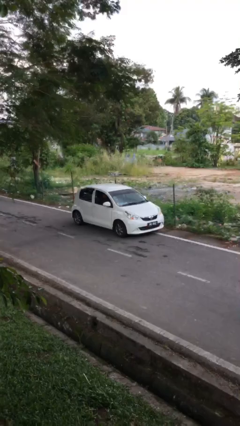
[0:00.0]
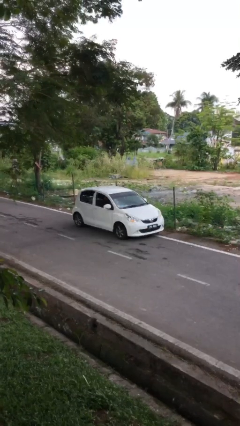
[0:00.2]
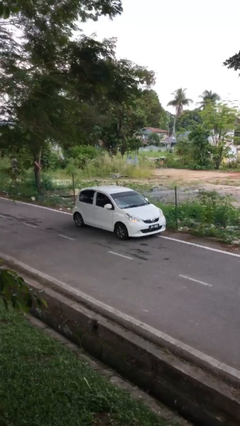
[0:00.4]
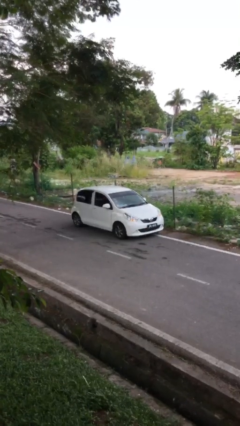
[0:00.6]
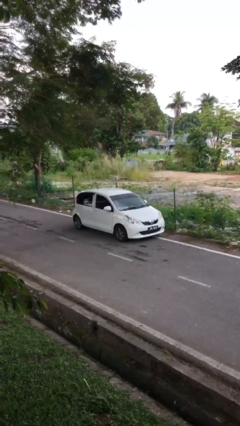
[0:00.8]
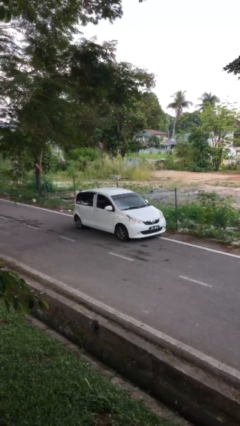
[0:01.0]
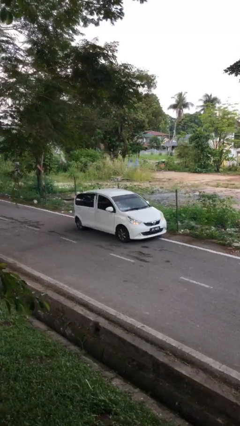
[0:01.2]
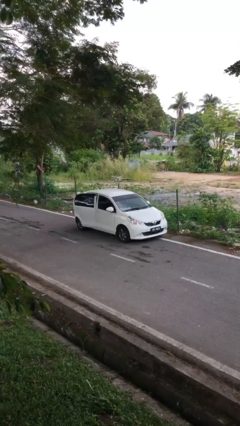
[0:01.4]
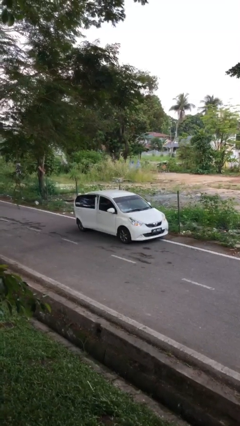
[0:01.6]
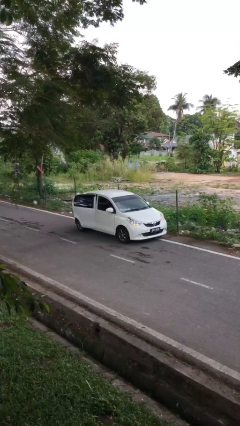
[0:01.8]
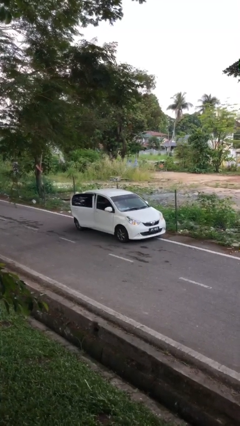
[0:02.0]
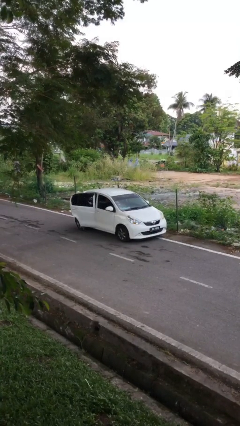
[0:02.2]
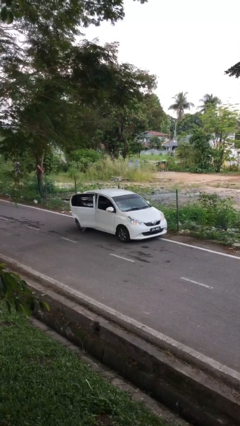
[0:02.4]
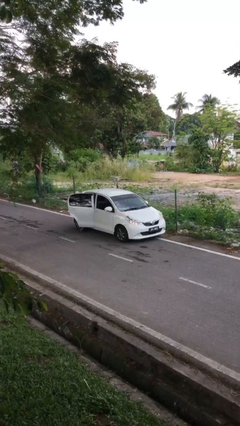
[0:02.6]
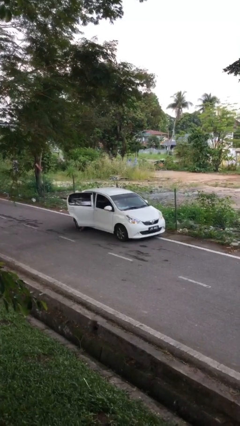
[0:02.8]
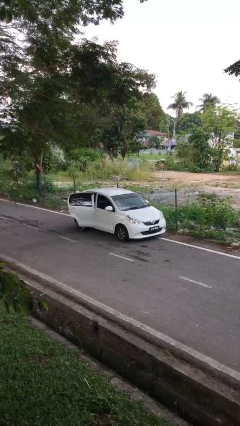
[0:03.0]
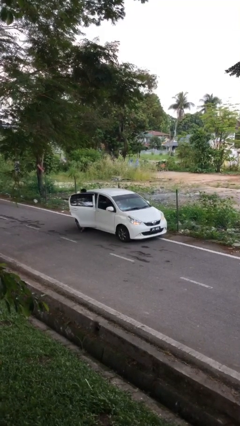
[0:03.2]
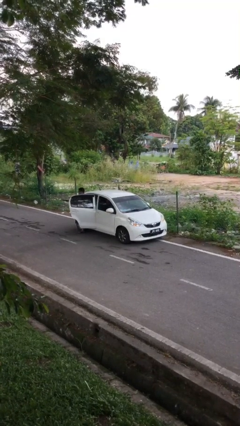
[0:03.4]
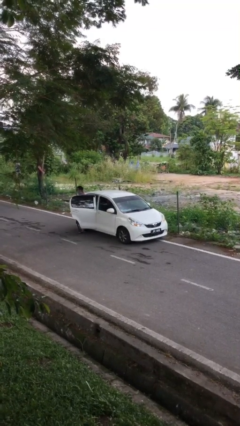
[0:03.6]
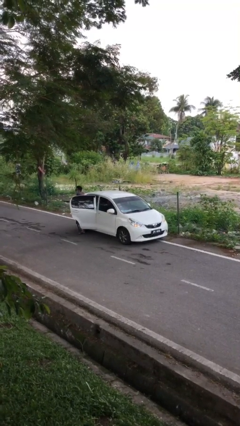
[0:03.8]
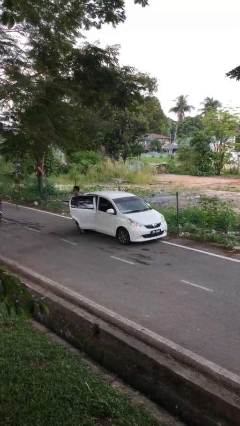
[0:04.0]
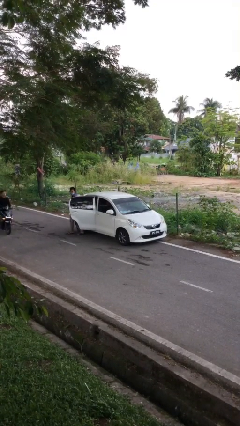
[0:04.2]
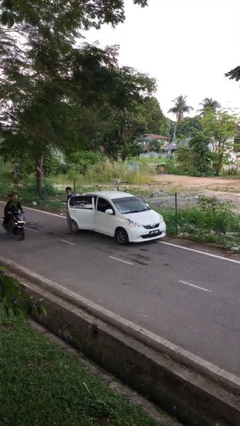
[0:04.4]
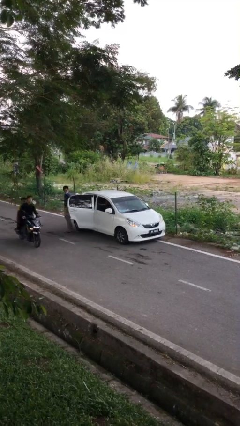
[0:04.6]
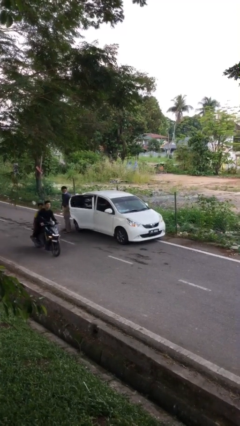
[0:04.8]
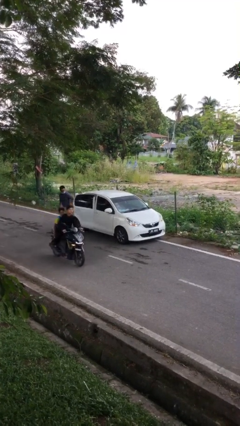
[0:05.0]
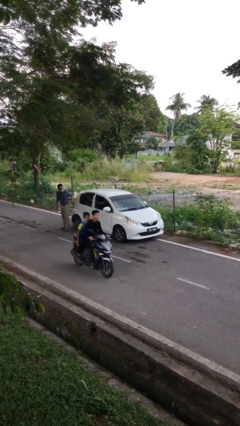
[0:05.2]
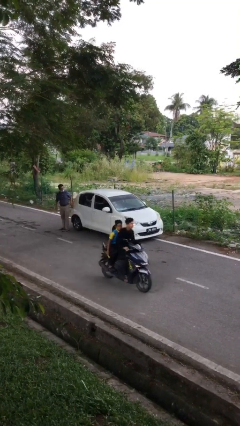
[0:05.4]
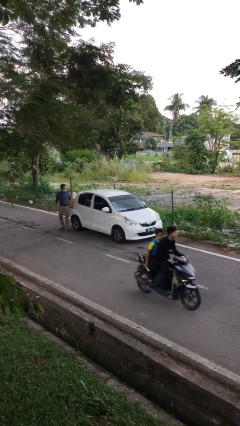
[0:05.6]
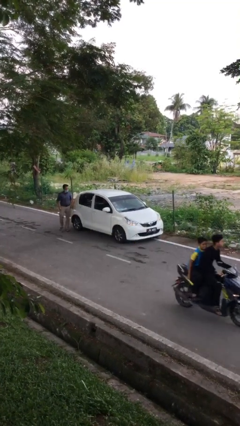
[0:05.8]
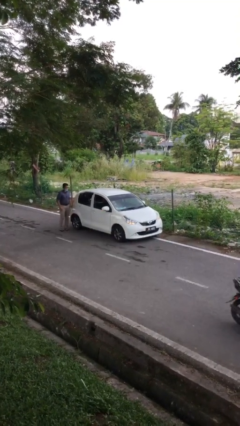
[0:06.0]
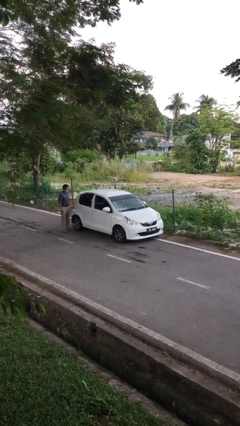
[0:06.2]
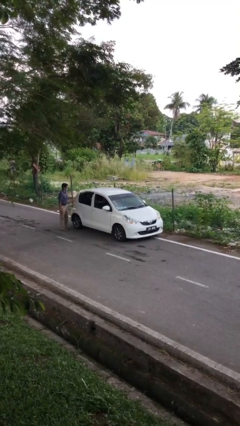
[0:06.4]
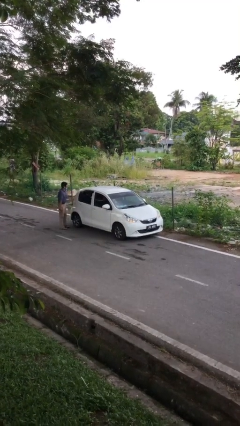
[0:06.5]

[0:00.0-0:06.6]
car drops off person

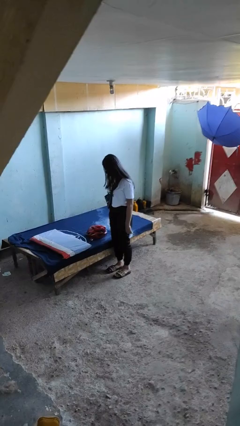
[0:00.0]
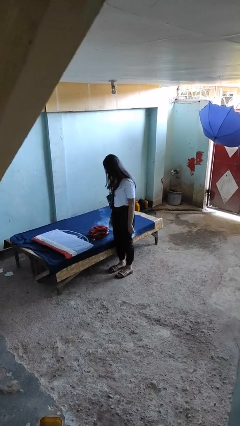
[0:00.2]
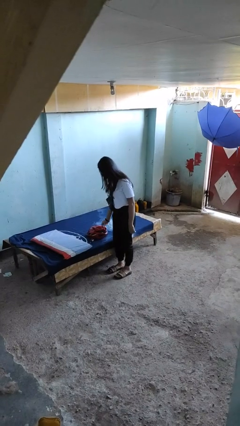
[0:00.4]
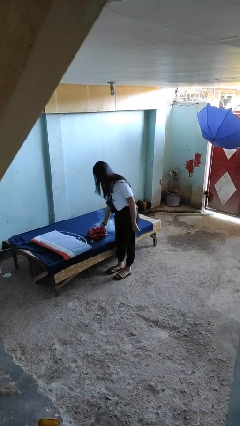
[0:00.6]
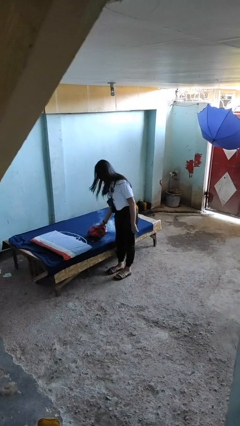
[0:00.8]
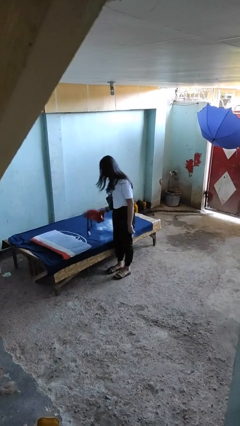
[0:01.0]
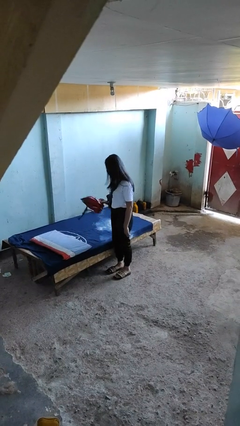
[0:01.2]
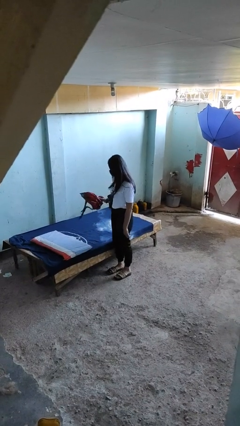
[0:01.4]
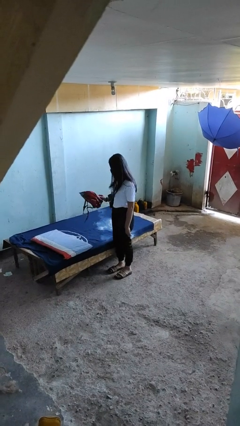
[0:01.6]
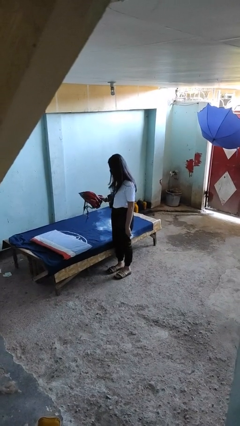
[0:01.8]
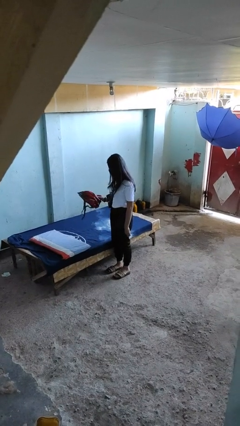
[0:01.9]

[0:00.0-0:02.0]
person picks up object from bed

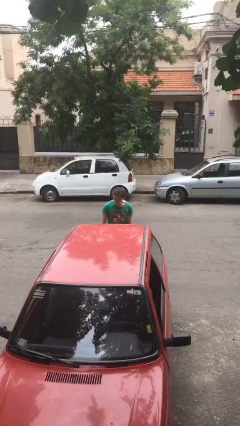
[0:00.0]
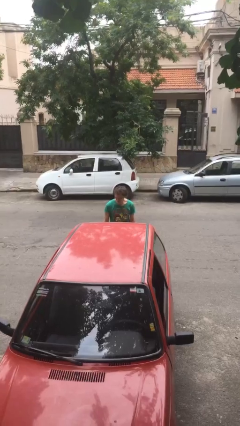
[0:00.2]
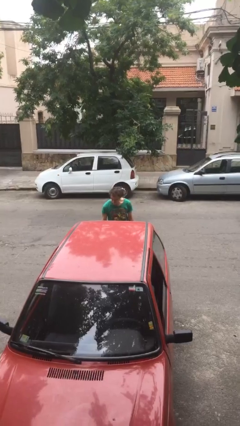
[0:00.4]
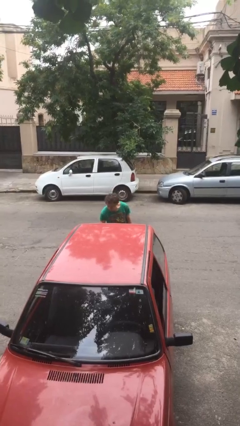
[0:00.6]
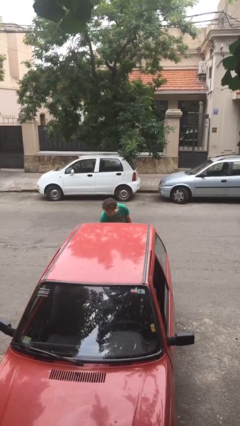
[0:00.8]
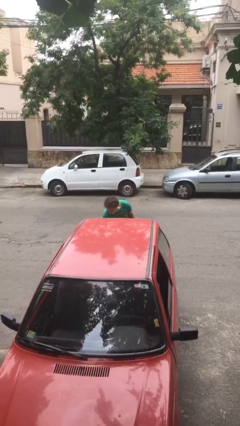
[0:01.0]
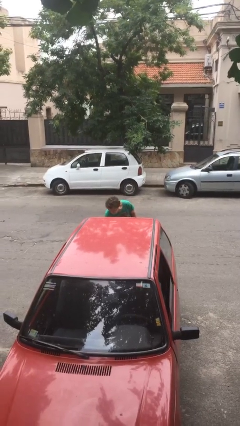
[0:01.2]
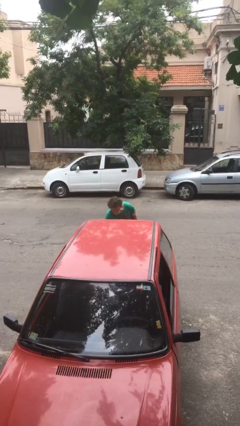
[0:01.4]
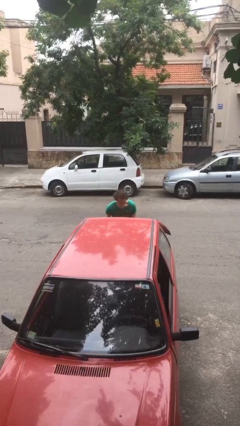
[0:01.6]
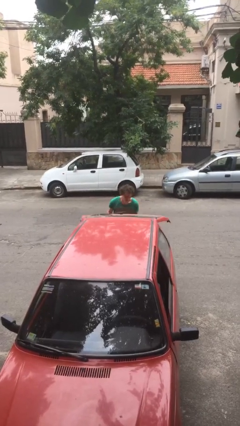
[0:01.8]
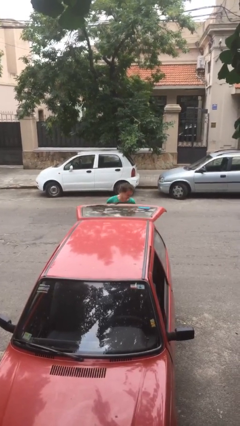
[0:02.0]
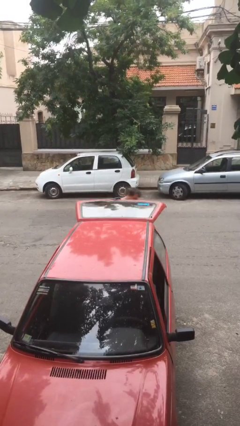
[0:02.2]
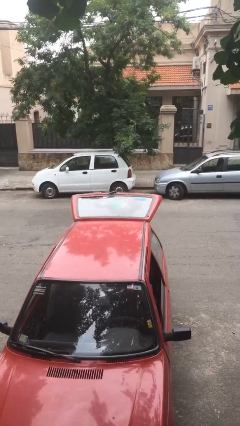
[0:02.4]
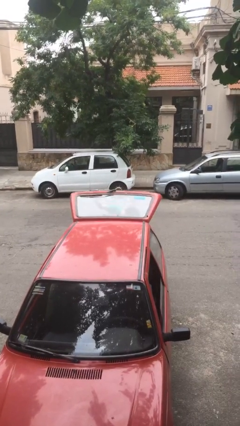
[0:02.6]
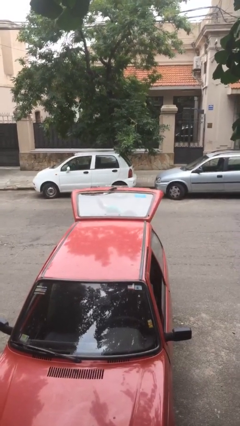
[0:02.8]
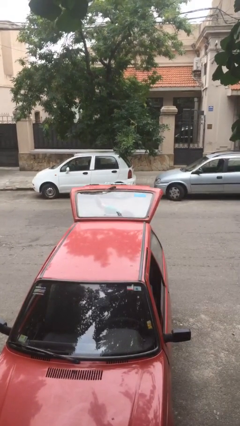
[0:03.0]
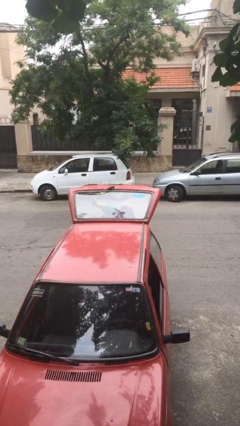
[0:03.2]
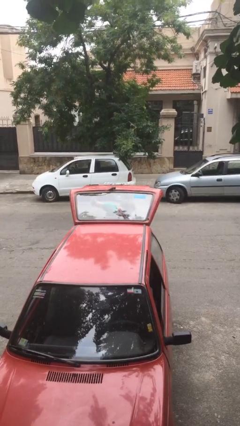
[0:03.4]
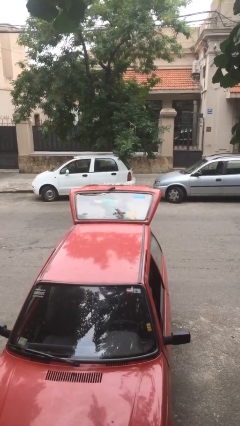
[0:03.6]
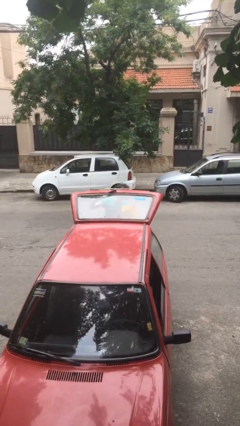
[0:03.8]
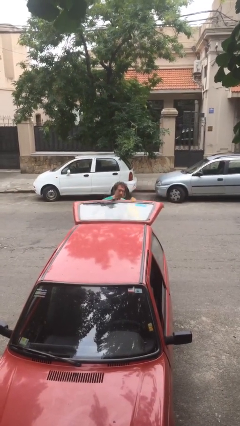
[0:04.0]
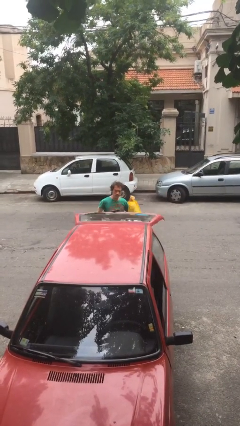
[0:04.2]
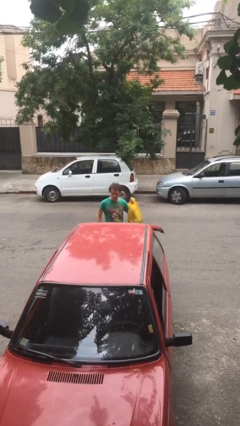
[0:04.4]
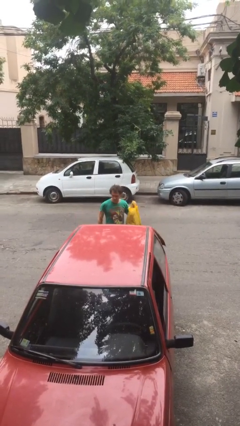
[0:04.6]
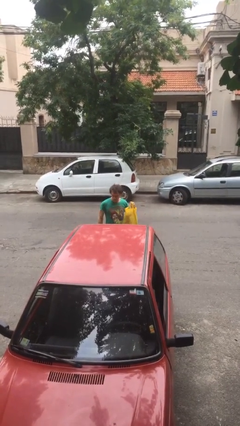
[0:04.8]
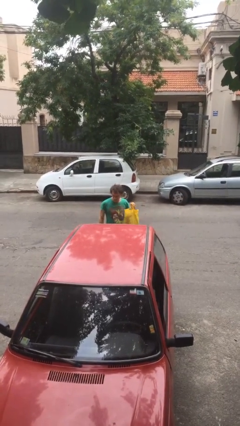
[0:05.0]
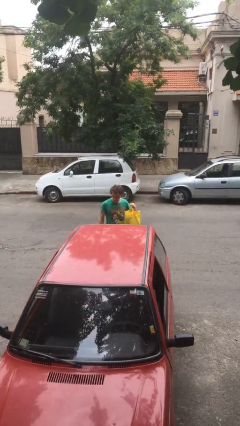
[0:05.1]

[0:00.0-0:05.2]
person unloads car

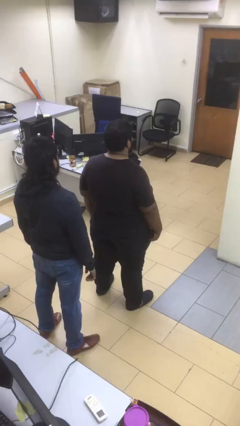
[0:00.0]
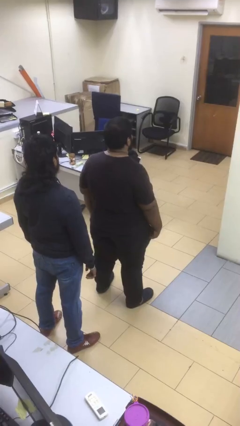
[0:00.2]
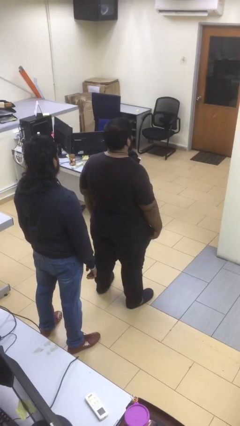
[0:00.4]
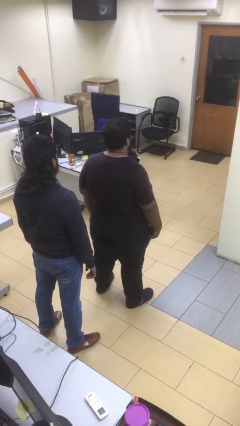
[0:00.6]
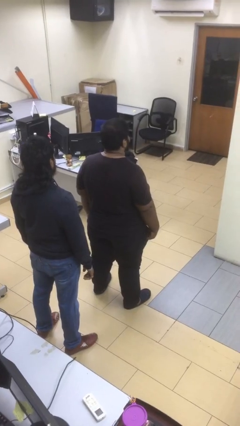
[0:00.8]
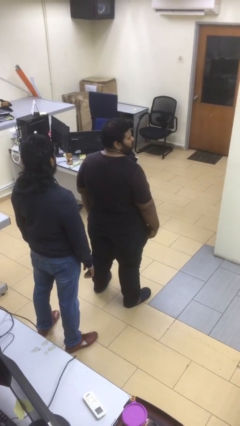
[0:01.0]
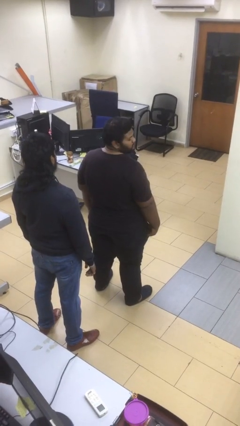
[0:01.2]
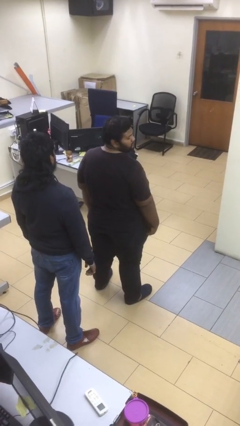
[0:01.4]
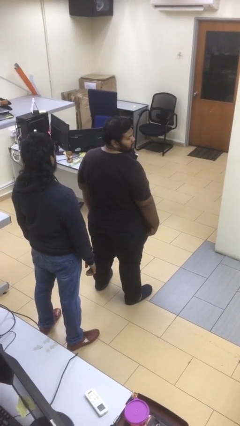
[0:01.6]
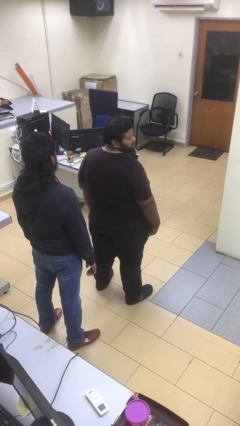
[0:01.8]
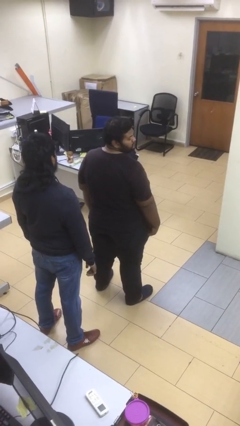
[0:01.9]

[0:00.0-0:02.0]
person looks over shoulder

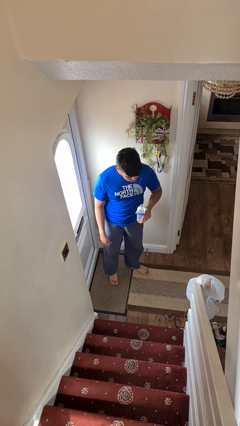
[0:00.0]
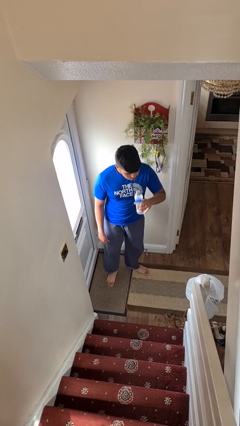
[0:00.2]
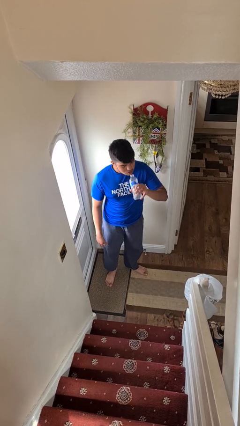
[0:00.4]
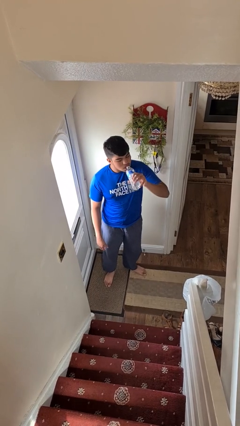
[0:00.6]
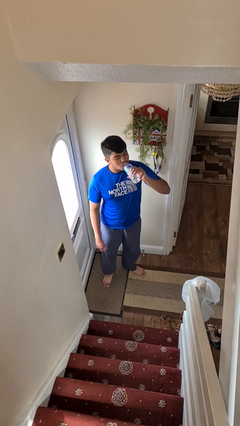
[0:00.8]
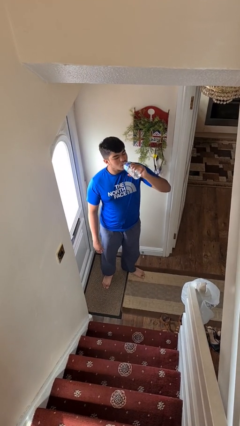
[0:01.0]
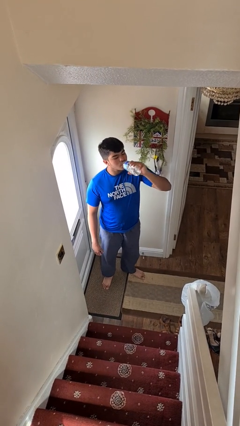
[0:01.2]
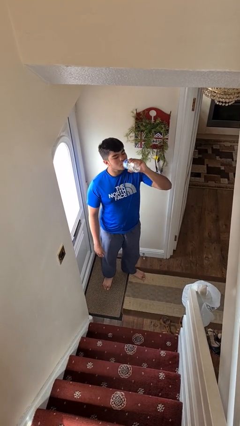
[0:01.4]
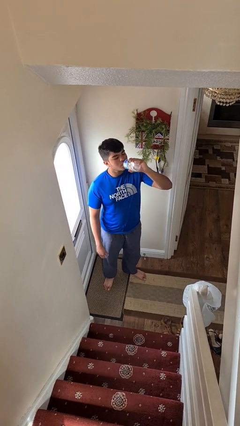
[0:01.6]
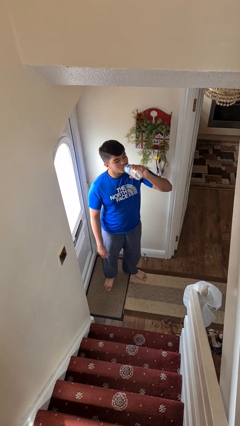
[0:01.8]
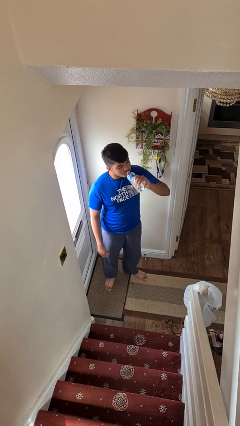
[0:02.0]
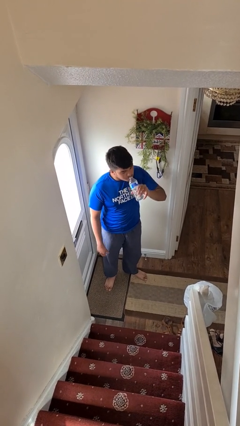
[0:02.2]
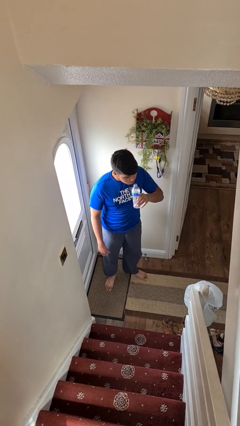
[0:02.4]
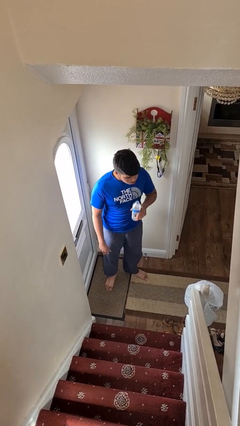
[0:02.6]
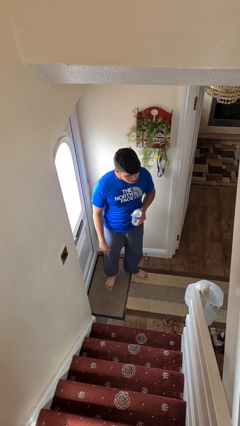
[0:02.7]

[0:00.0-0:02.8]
person drinks from bottle
